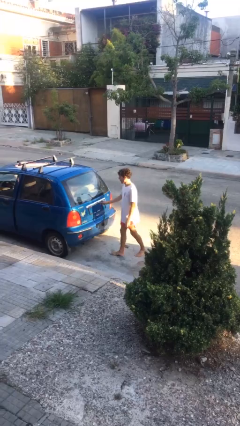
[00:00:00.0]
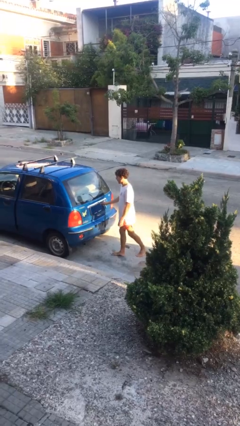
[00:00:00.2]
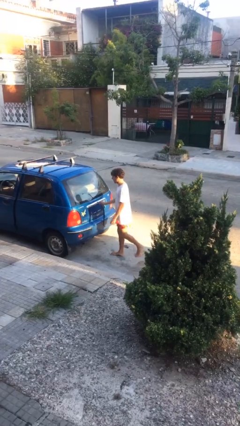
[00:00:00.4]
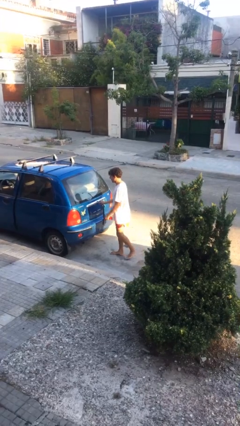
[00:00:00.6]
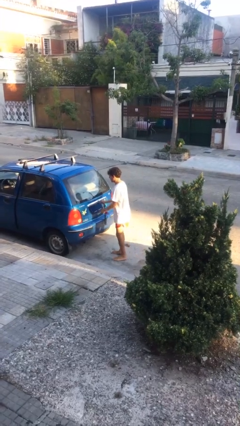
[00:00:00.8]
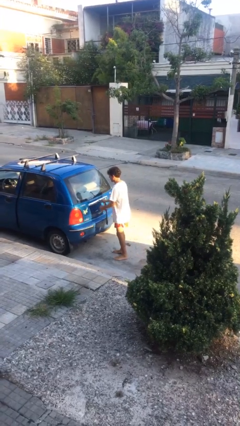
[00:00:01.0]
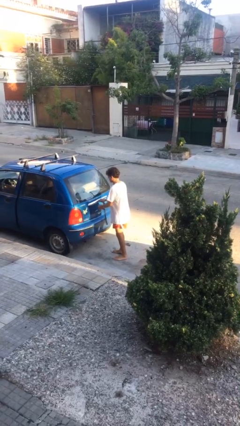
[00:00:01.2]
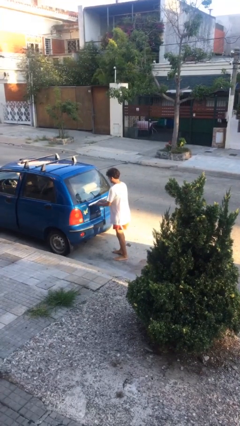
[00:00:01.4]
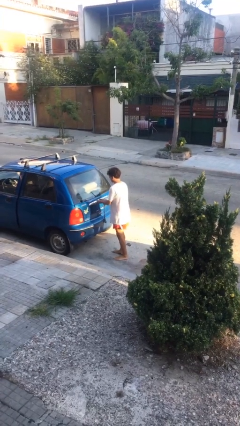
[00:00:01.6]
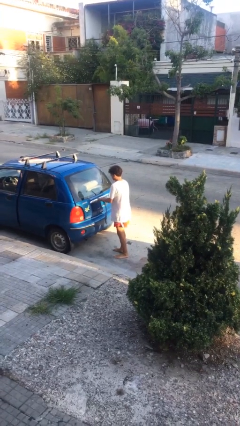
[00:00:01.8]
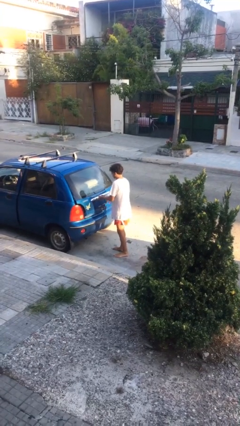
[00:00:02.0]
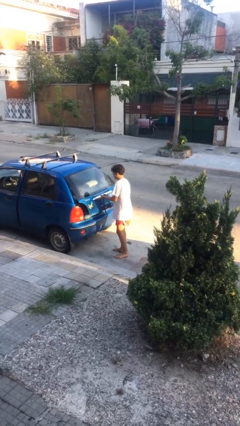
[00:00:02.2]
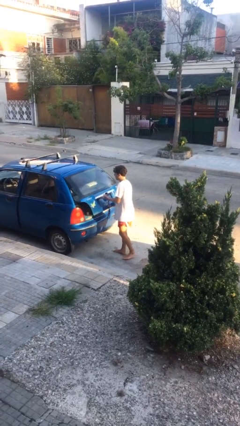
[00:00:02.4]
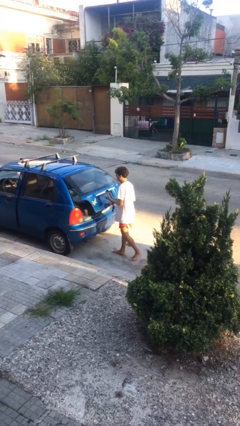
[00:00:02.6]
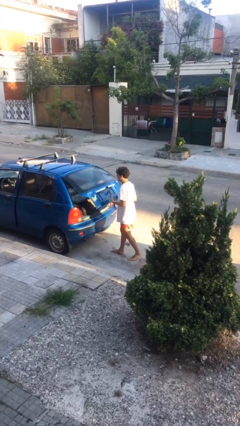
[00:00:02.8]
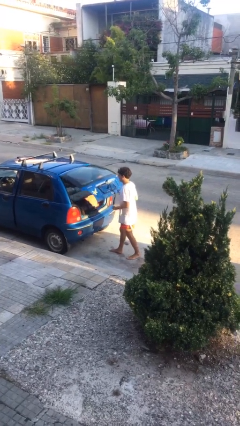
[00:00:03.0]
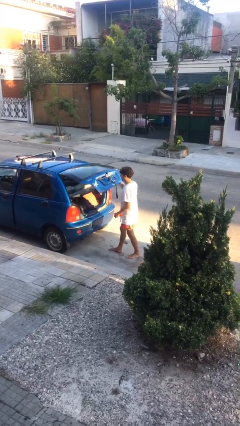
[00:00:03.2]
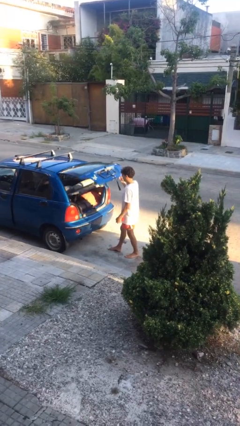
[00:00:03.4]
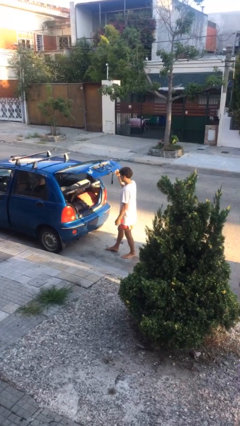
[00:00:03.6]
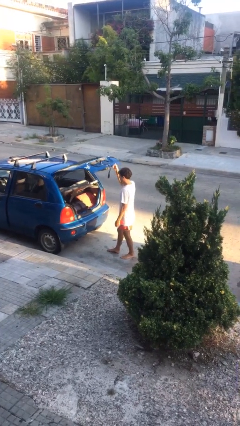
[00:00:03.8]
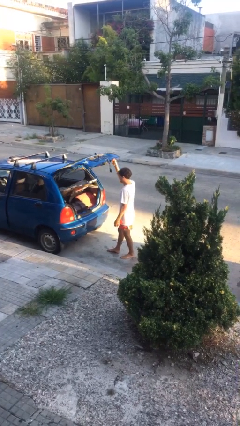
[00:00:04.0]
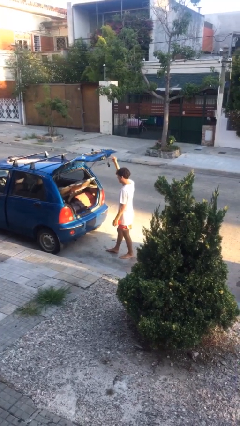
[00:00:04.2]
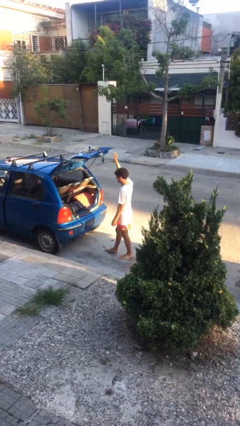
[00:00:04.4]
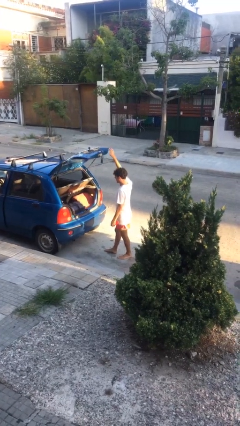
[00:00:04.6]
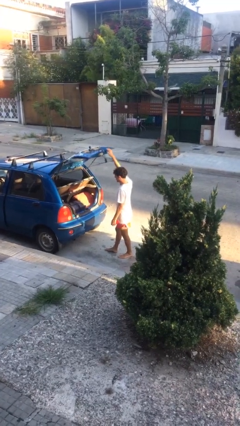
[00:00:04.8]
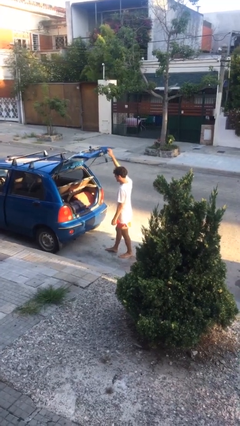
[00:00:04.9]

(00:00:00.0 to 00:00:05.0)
person opens car trunk

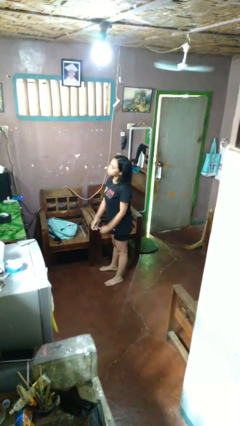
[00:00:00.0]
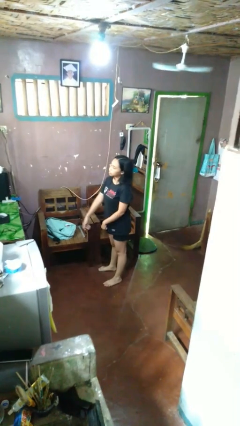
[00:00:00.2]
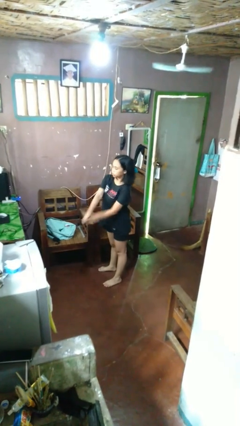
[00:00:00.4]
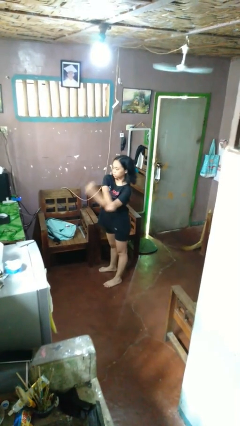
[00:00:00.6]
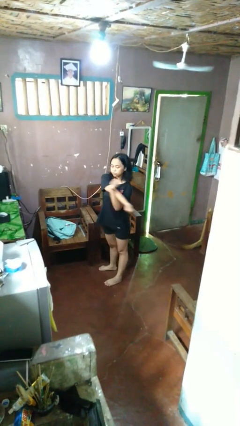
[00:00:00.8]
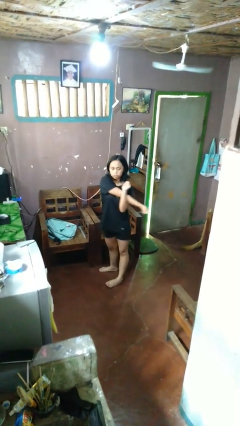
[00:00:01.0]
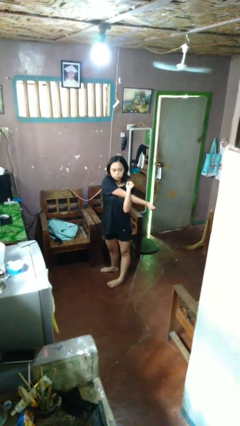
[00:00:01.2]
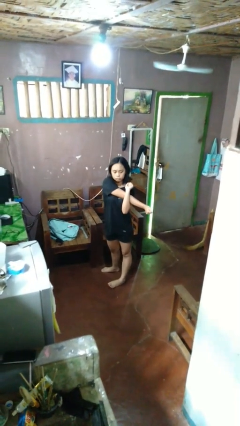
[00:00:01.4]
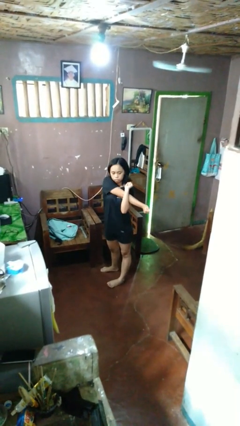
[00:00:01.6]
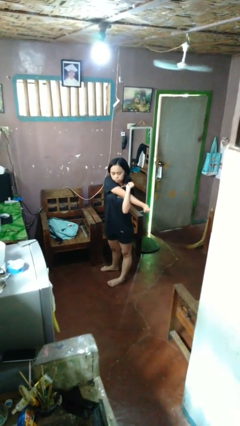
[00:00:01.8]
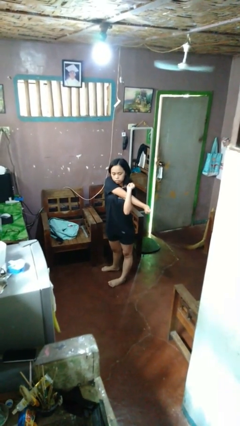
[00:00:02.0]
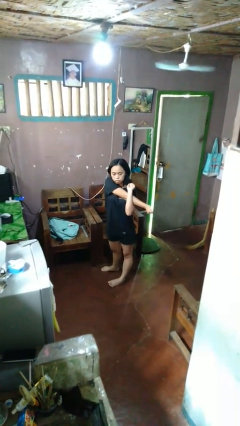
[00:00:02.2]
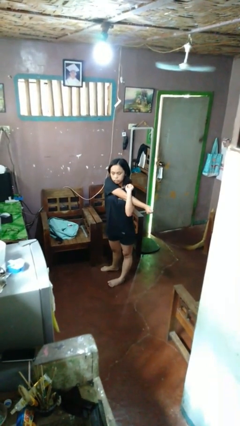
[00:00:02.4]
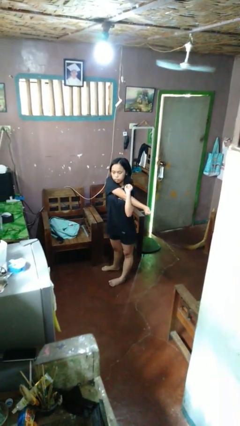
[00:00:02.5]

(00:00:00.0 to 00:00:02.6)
person stretches arms to side

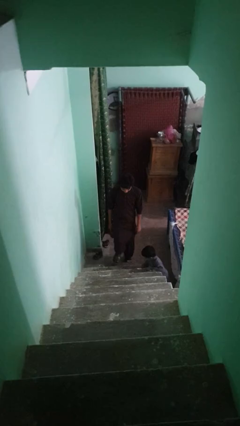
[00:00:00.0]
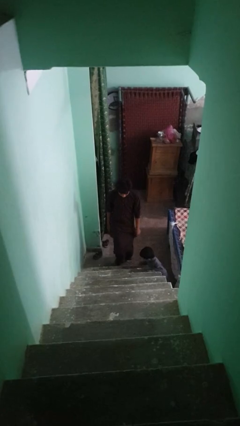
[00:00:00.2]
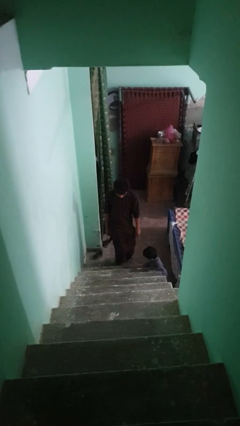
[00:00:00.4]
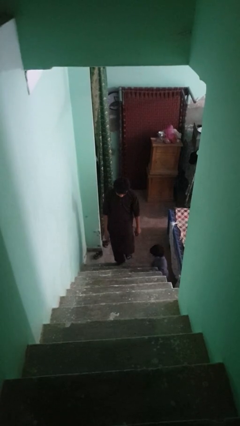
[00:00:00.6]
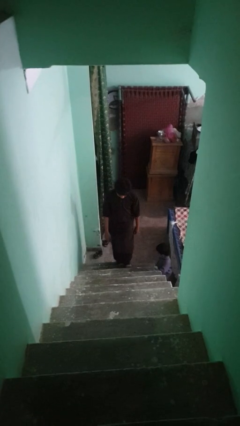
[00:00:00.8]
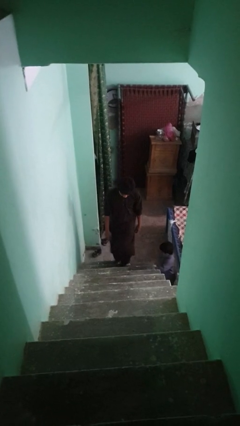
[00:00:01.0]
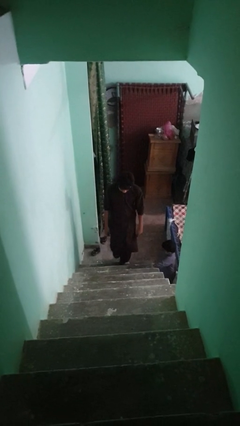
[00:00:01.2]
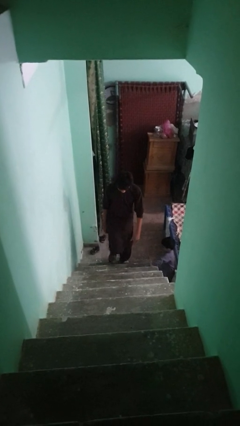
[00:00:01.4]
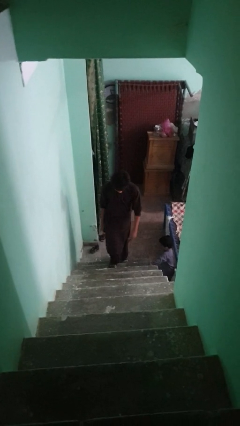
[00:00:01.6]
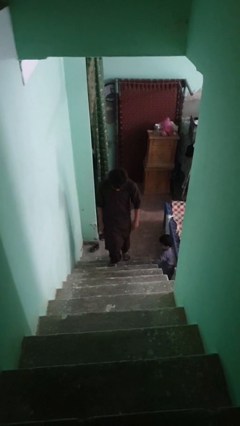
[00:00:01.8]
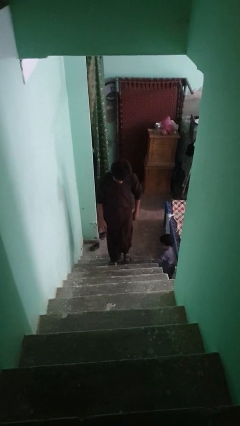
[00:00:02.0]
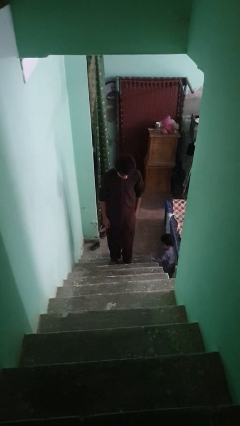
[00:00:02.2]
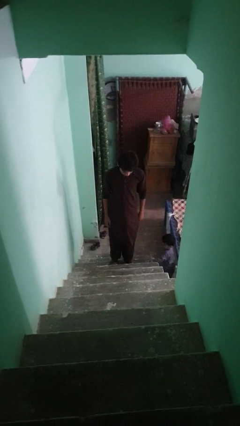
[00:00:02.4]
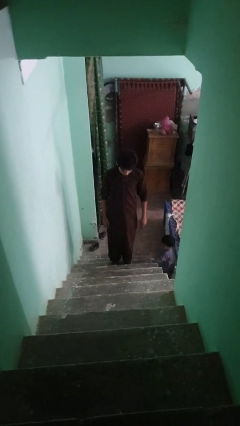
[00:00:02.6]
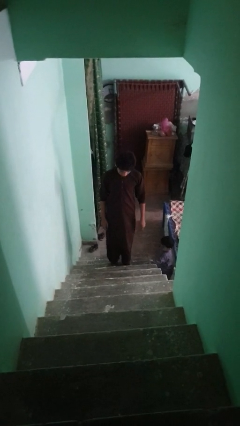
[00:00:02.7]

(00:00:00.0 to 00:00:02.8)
person climbs up stairs

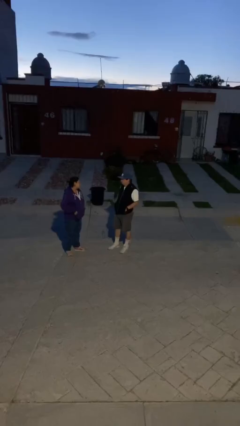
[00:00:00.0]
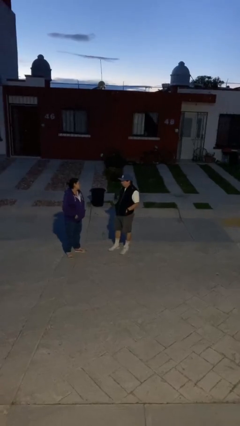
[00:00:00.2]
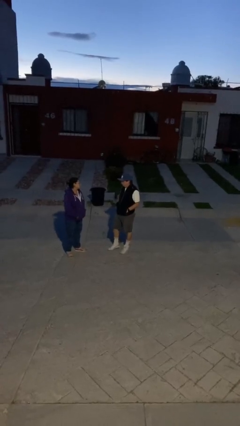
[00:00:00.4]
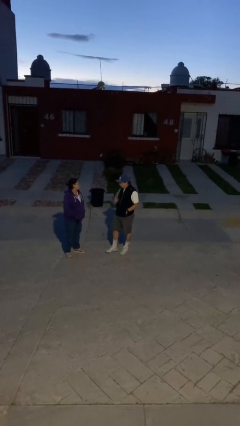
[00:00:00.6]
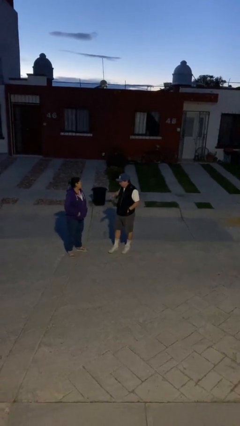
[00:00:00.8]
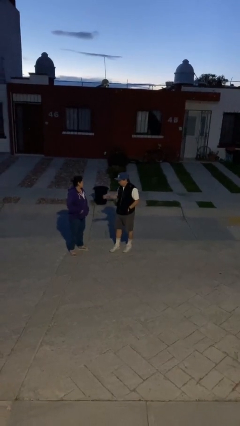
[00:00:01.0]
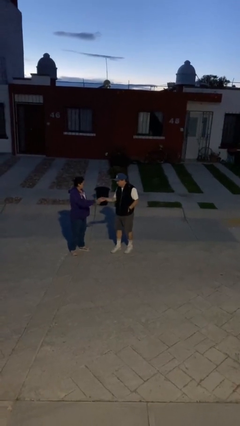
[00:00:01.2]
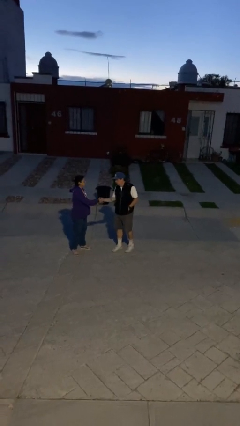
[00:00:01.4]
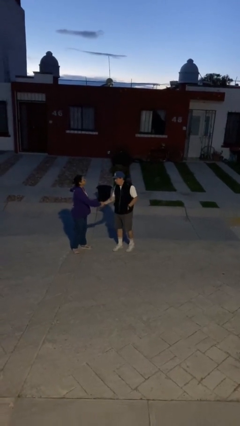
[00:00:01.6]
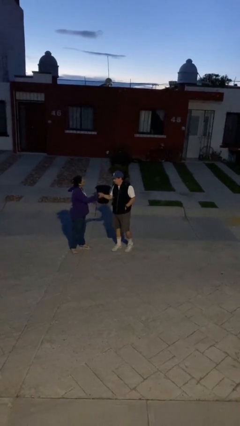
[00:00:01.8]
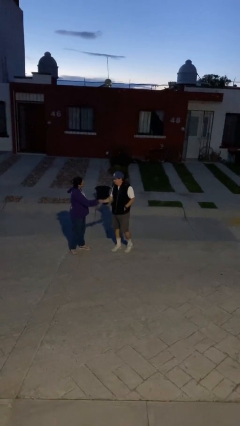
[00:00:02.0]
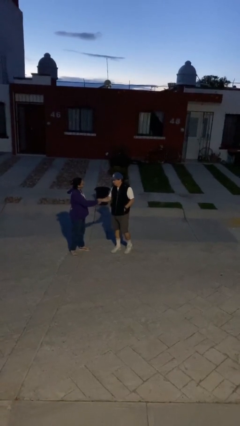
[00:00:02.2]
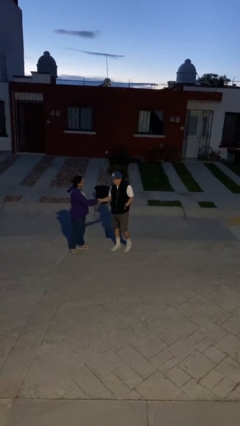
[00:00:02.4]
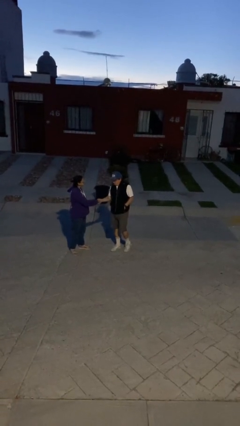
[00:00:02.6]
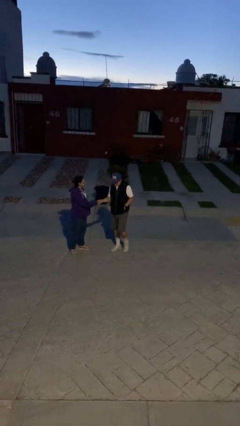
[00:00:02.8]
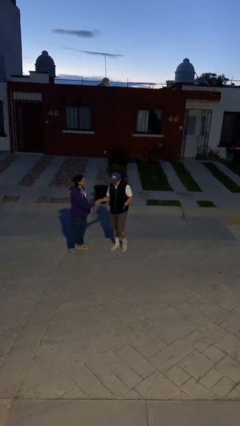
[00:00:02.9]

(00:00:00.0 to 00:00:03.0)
person shakes hand

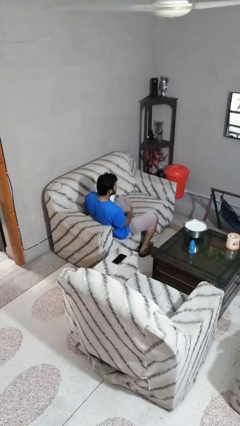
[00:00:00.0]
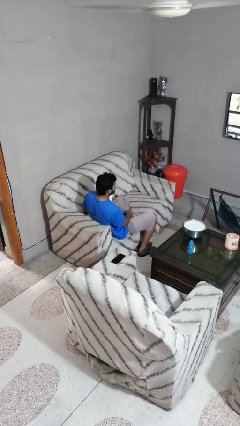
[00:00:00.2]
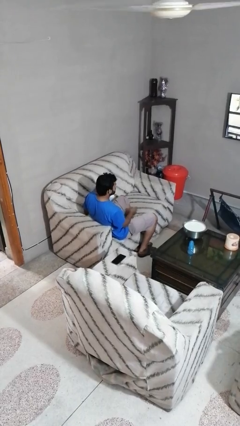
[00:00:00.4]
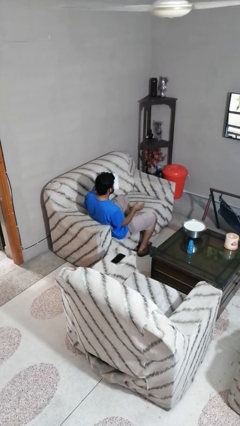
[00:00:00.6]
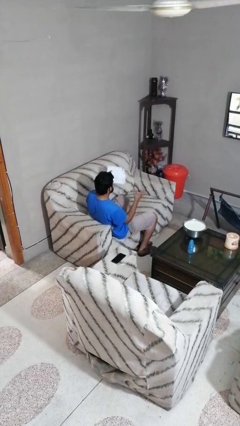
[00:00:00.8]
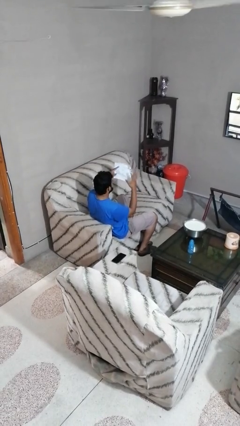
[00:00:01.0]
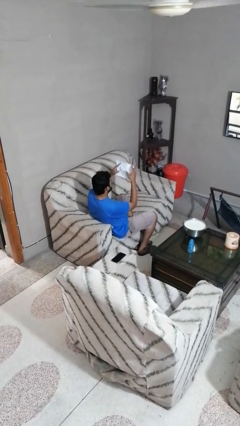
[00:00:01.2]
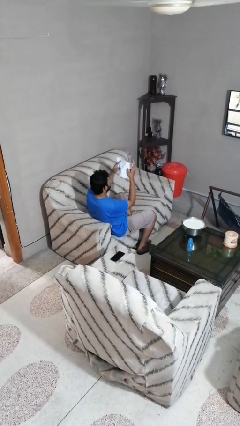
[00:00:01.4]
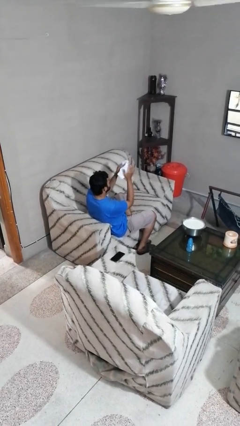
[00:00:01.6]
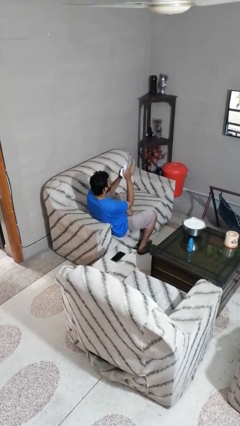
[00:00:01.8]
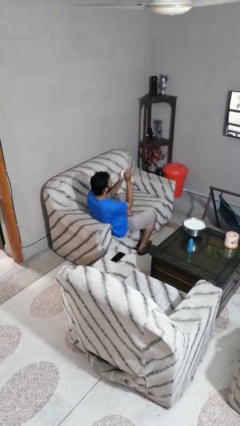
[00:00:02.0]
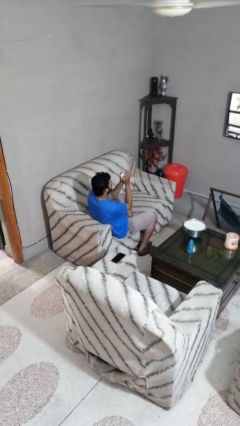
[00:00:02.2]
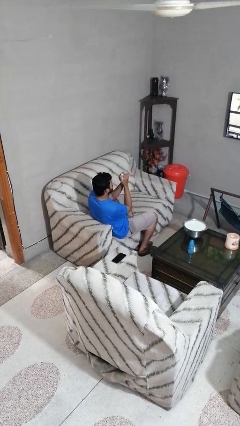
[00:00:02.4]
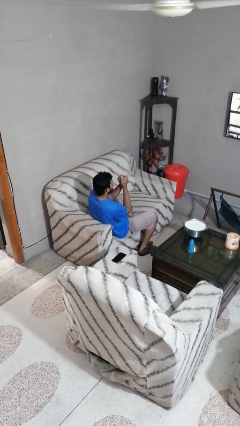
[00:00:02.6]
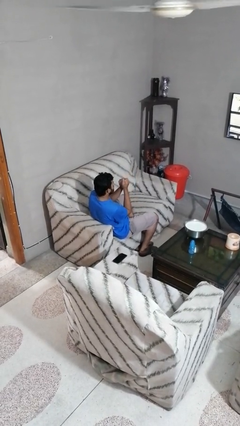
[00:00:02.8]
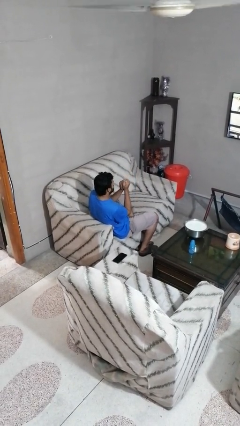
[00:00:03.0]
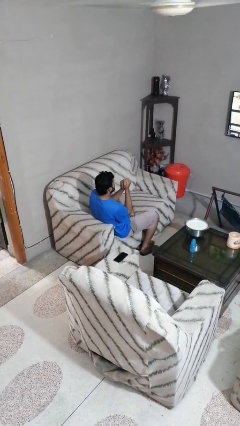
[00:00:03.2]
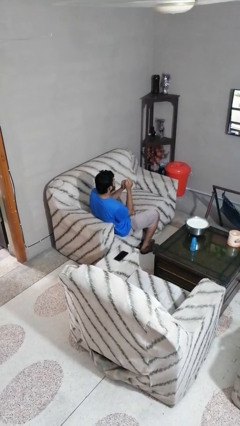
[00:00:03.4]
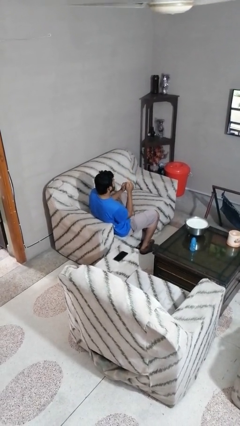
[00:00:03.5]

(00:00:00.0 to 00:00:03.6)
person crumples paper

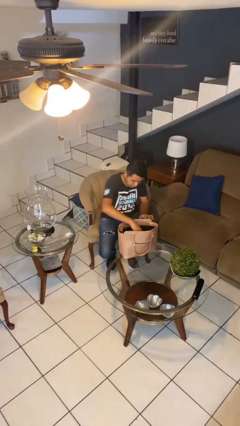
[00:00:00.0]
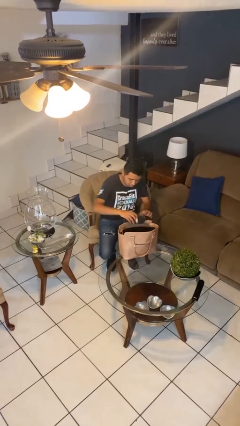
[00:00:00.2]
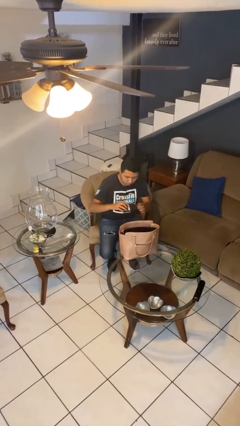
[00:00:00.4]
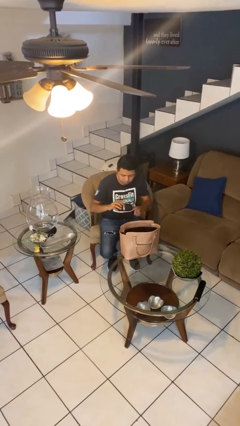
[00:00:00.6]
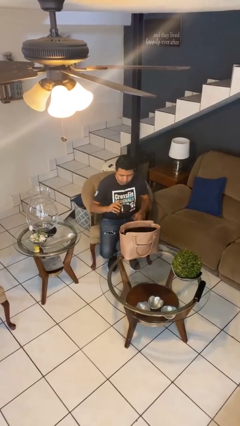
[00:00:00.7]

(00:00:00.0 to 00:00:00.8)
person takes object from purse
